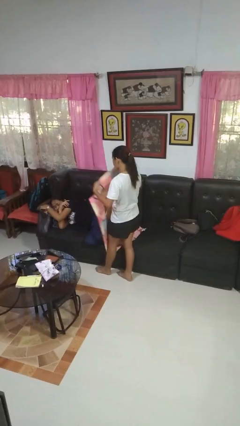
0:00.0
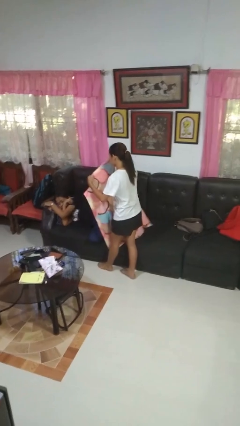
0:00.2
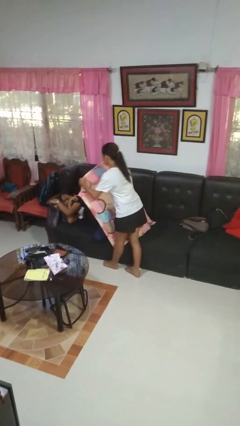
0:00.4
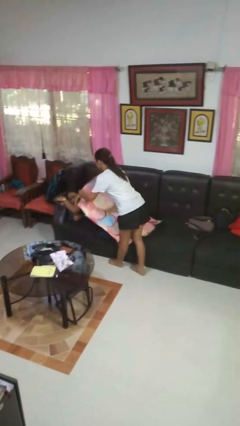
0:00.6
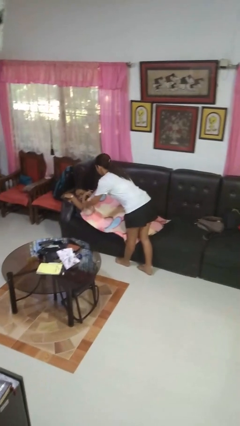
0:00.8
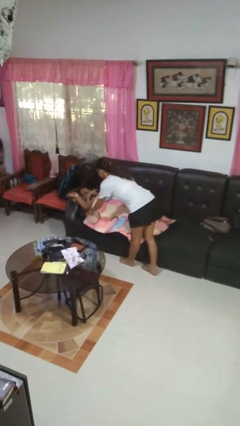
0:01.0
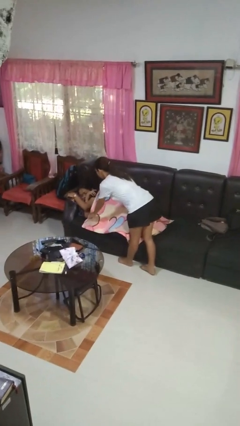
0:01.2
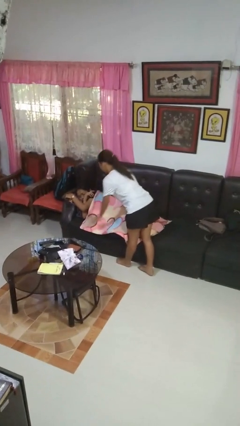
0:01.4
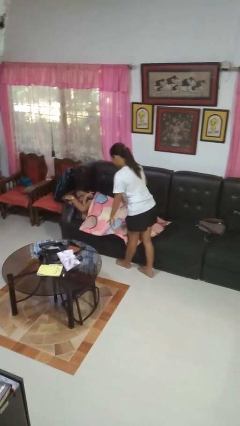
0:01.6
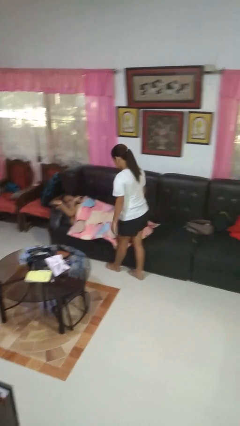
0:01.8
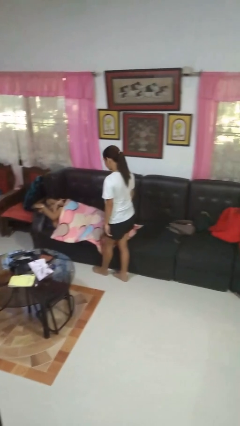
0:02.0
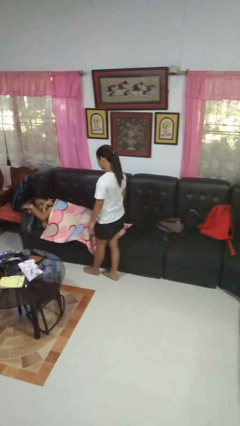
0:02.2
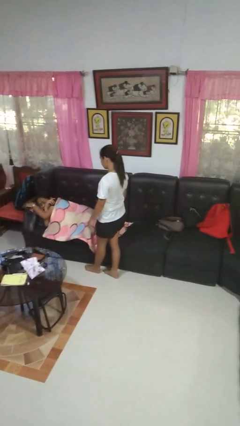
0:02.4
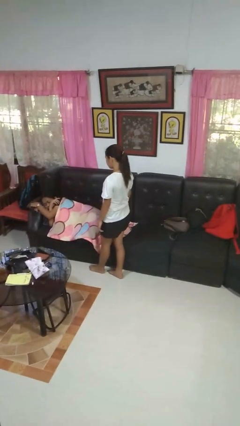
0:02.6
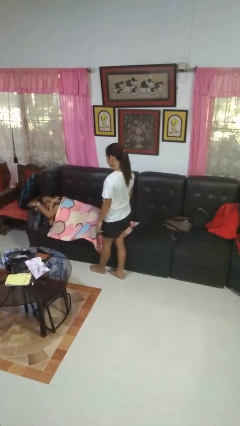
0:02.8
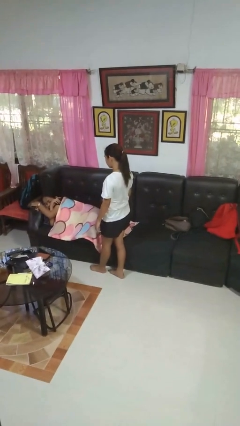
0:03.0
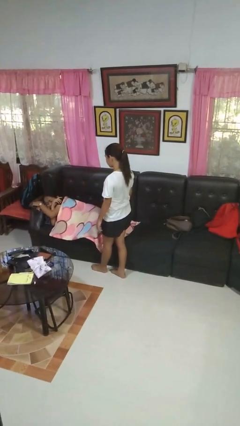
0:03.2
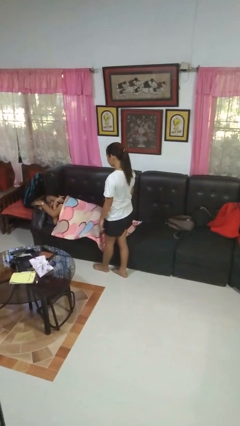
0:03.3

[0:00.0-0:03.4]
person covers friend with blanket

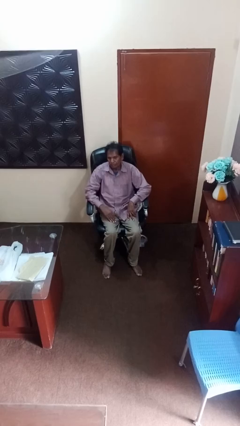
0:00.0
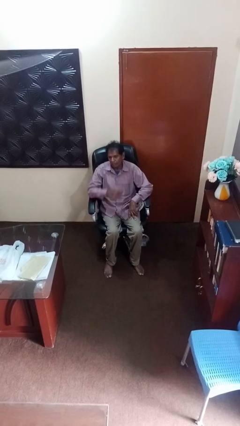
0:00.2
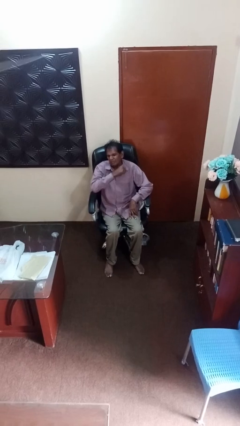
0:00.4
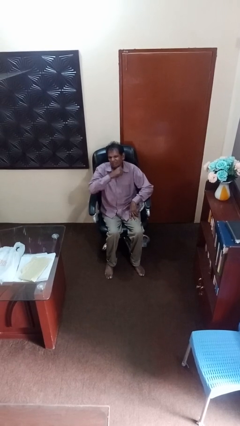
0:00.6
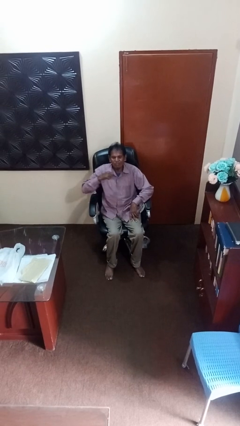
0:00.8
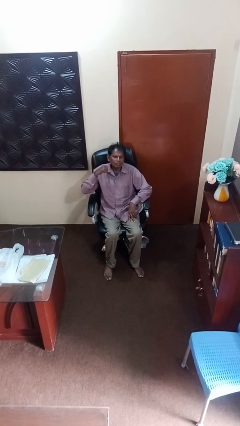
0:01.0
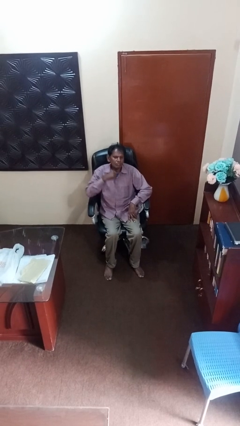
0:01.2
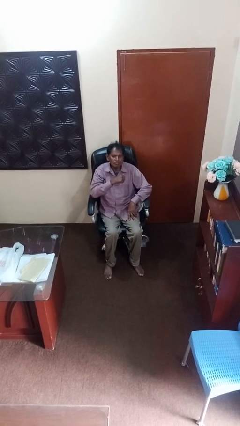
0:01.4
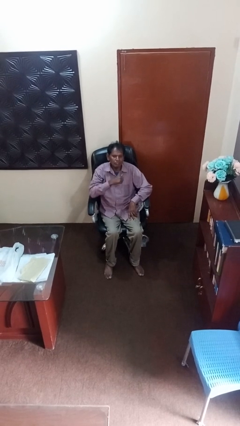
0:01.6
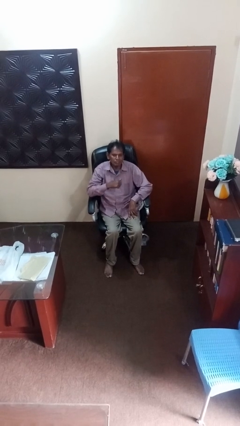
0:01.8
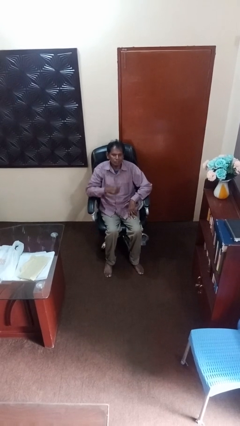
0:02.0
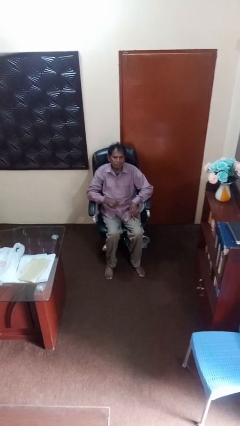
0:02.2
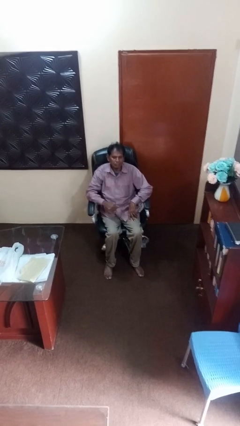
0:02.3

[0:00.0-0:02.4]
person gestures cut

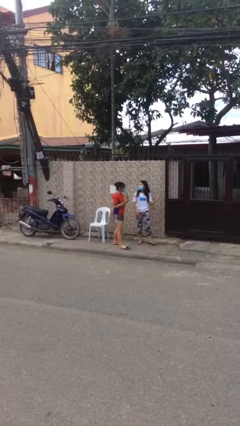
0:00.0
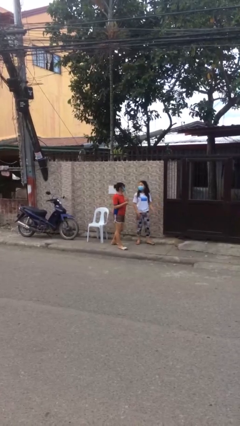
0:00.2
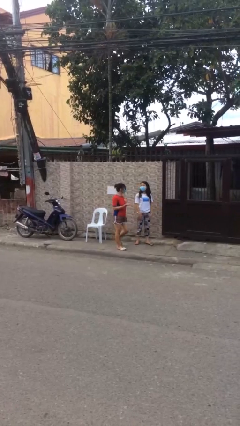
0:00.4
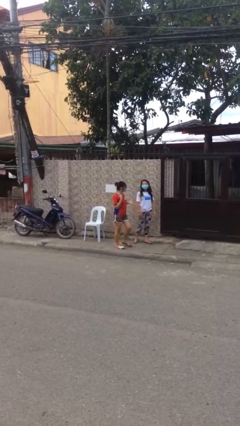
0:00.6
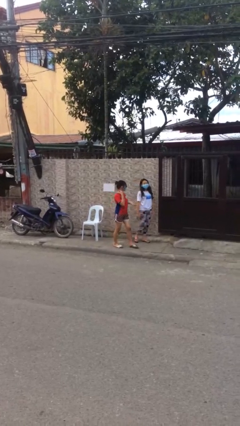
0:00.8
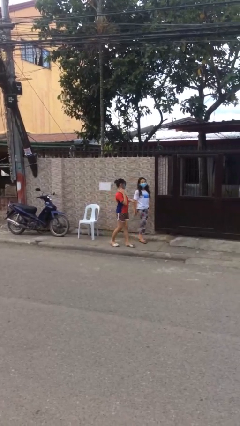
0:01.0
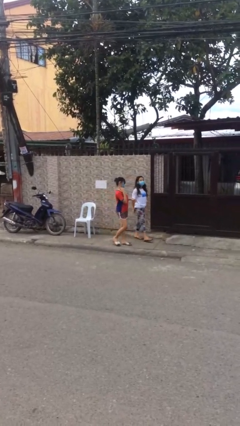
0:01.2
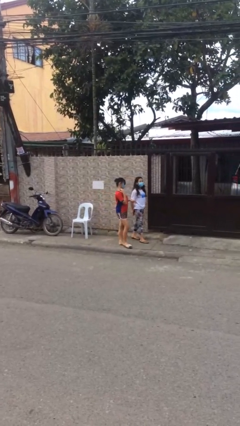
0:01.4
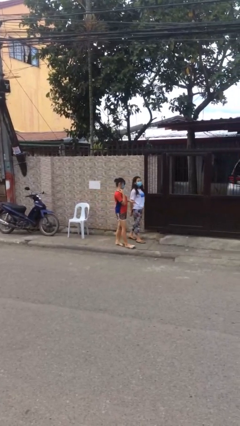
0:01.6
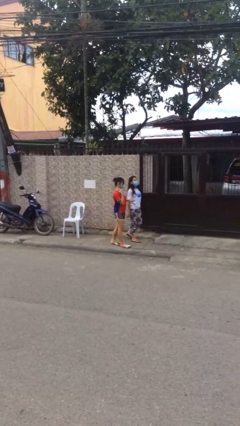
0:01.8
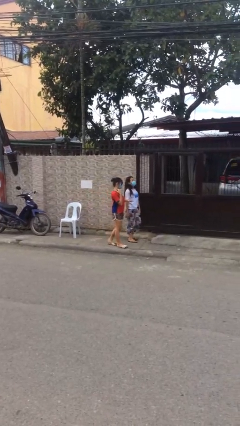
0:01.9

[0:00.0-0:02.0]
person talks to person

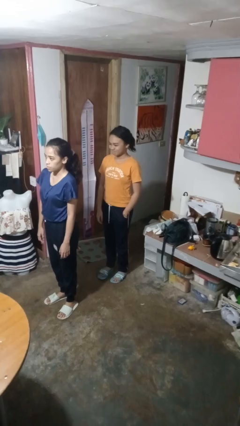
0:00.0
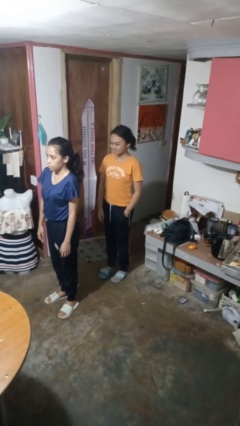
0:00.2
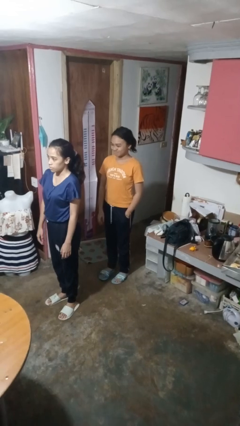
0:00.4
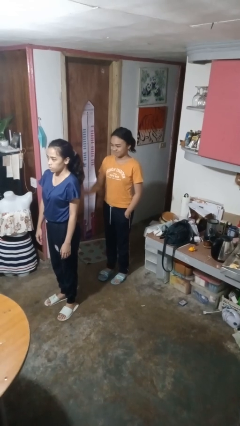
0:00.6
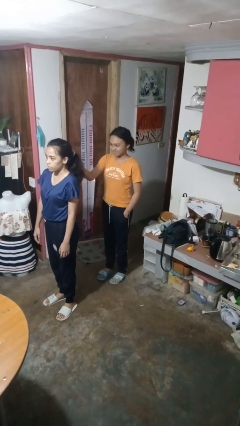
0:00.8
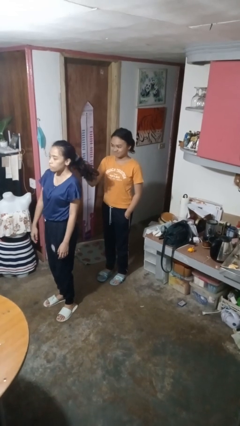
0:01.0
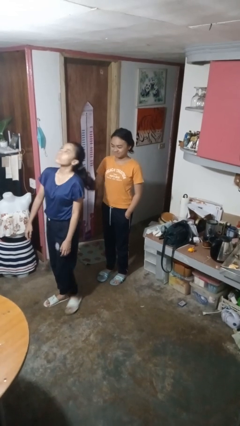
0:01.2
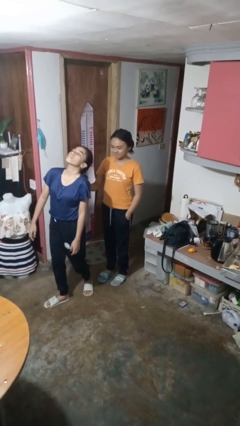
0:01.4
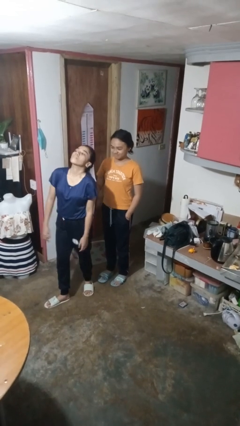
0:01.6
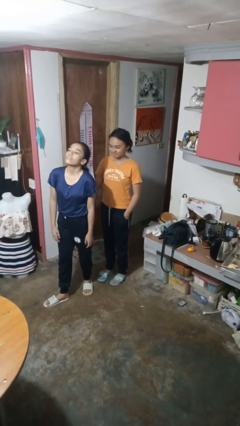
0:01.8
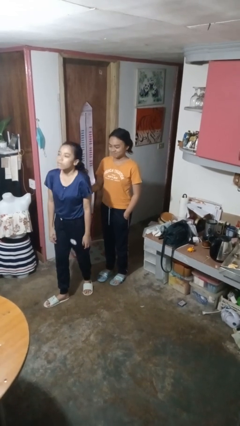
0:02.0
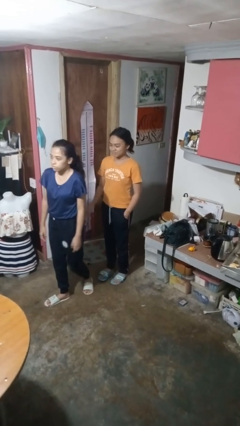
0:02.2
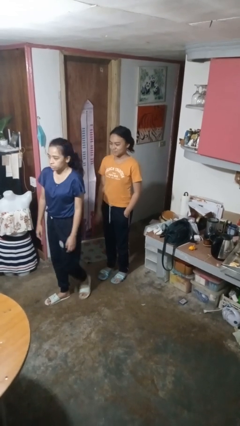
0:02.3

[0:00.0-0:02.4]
person grabs person by hair

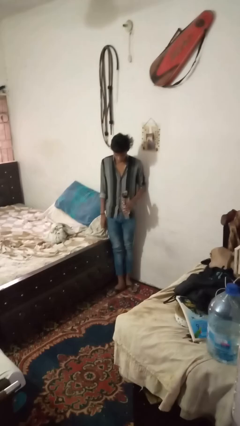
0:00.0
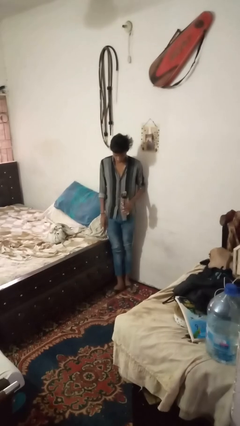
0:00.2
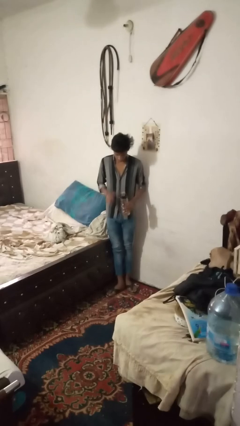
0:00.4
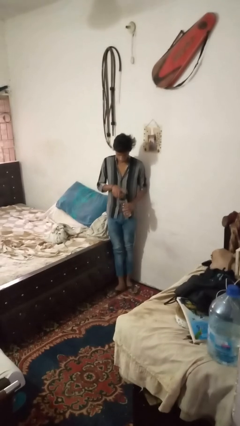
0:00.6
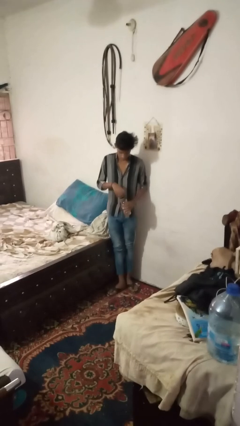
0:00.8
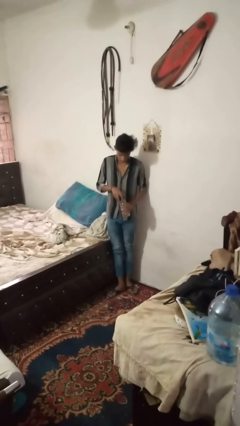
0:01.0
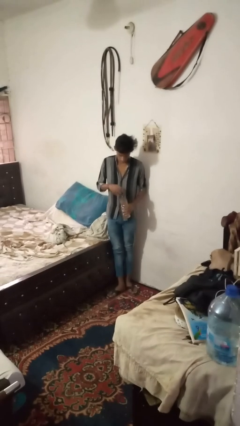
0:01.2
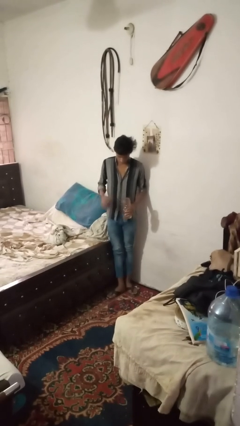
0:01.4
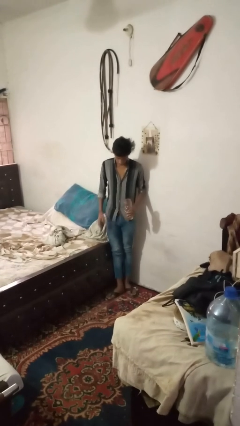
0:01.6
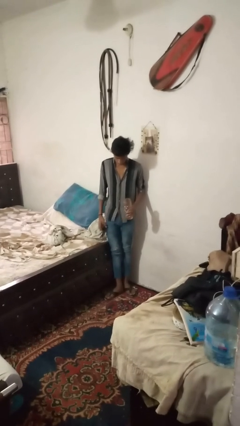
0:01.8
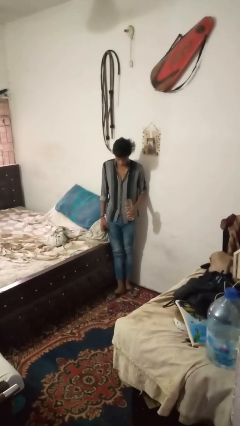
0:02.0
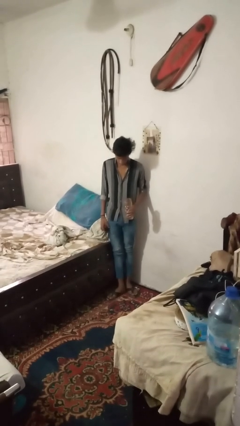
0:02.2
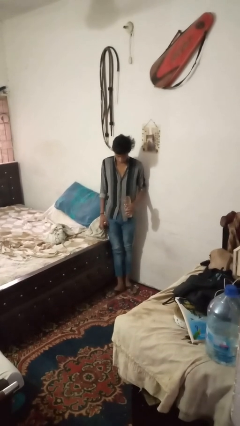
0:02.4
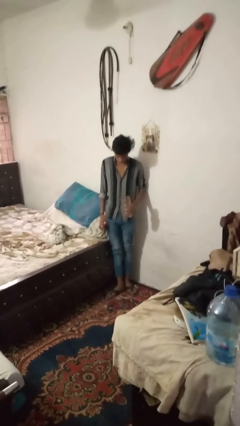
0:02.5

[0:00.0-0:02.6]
person unscrews lid from bottle

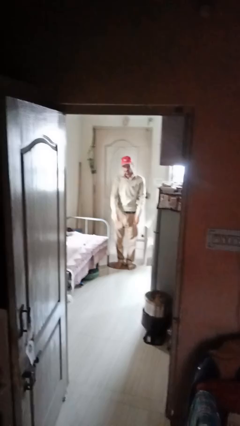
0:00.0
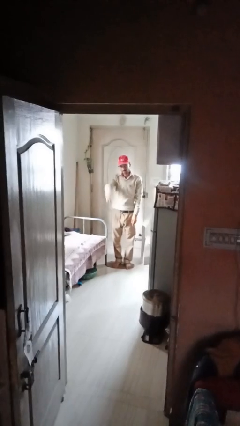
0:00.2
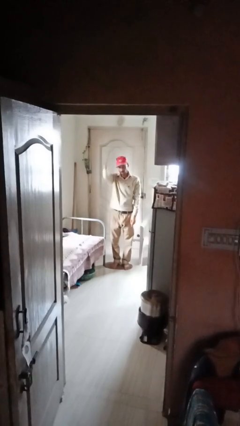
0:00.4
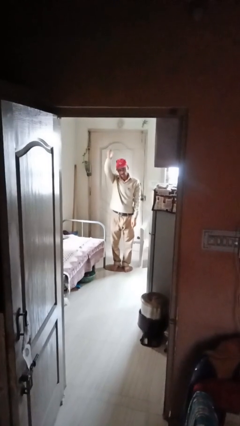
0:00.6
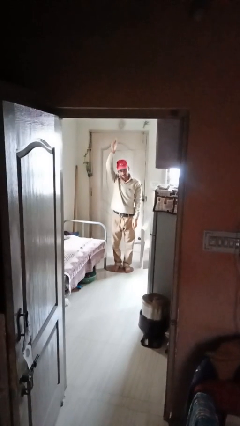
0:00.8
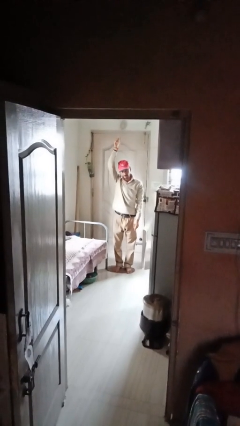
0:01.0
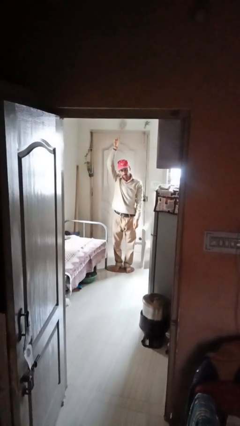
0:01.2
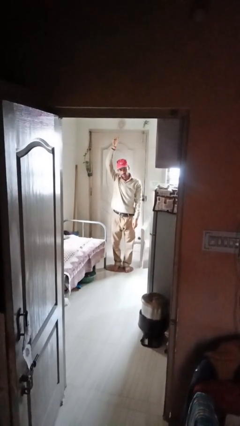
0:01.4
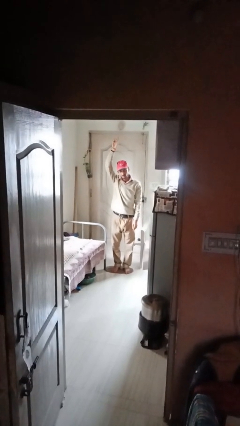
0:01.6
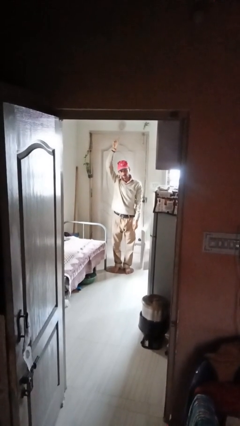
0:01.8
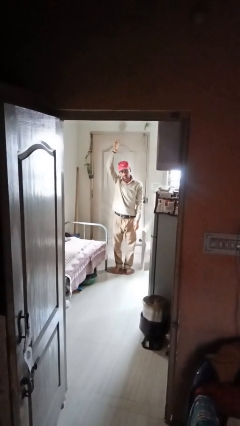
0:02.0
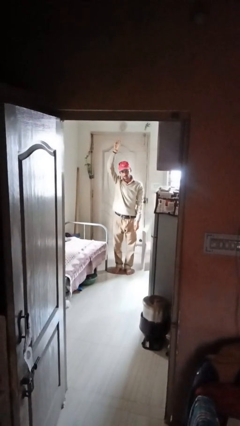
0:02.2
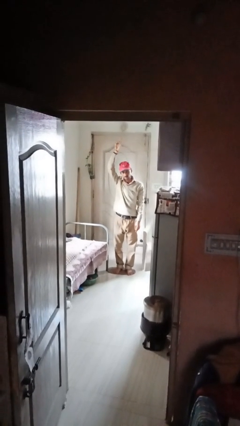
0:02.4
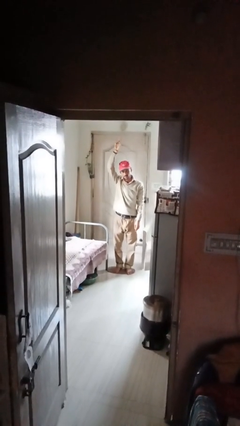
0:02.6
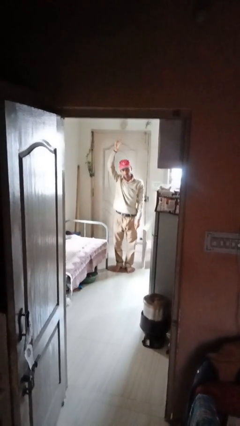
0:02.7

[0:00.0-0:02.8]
person gestures swipe up

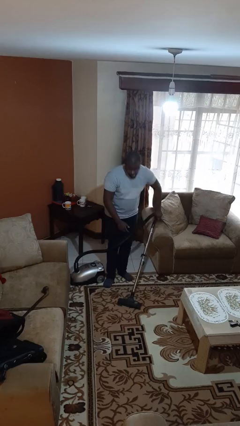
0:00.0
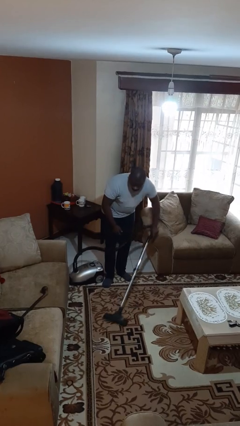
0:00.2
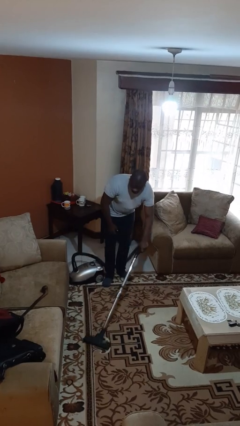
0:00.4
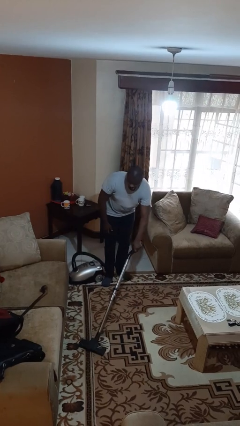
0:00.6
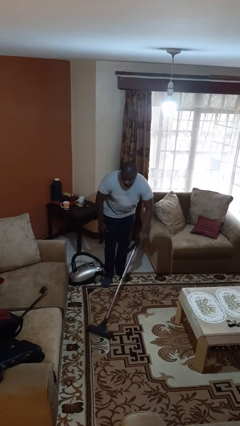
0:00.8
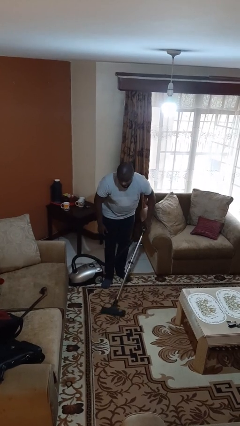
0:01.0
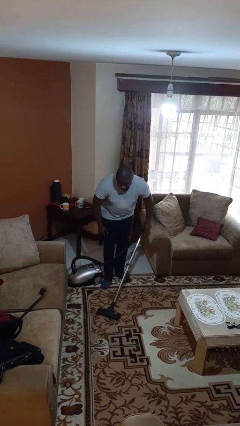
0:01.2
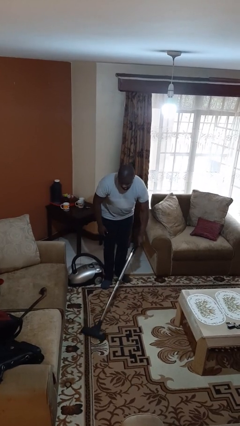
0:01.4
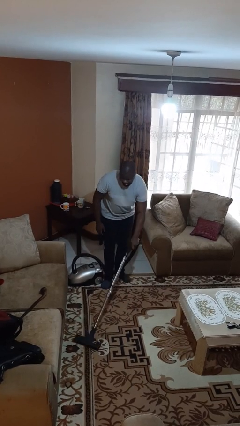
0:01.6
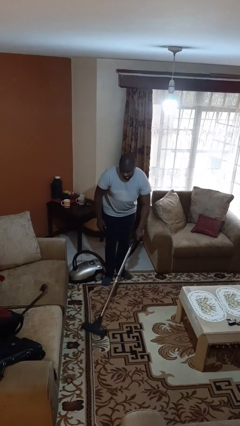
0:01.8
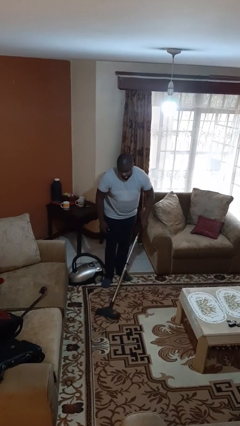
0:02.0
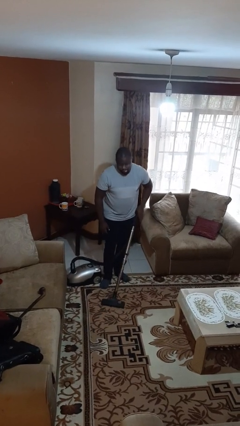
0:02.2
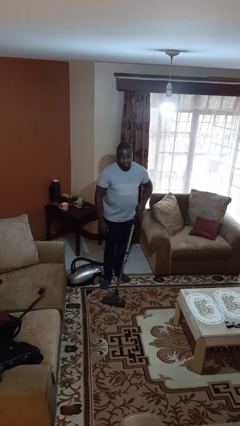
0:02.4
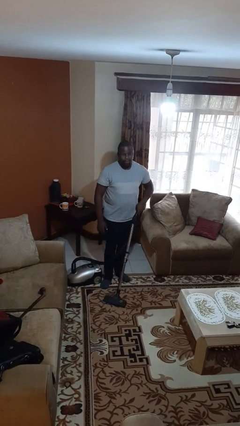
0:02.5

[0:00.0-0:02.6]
person vacuums carpet
